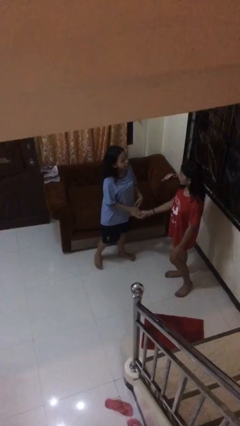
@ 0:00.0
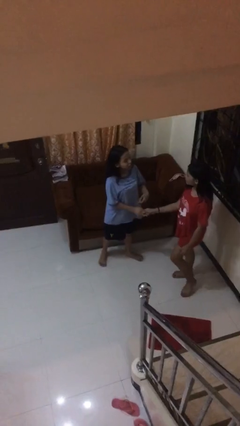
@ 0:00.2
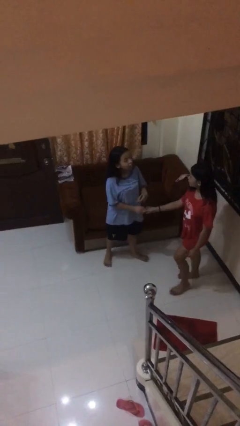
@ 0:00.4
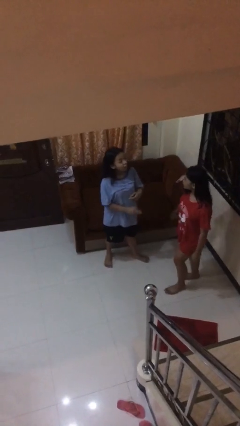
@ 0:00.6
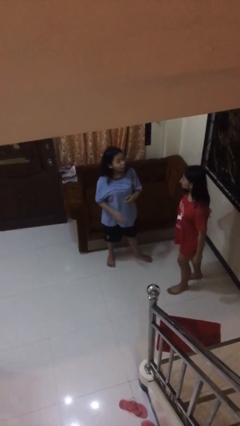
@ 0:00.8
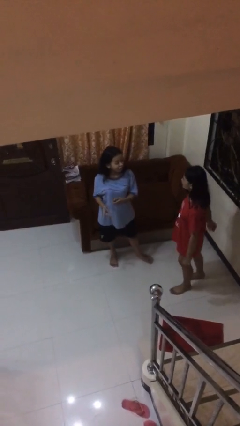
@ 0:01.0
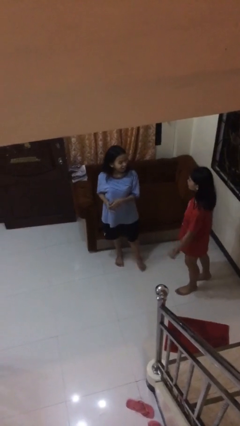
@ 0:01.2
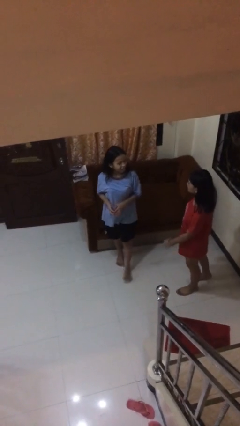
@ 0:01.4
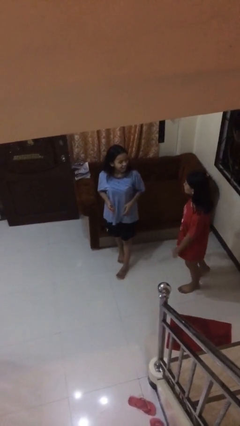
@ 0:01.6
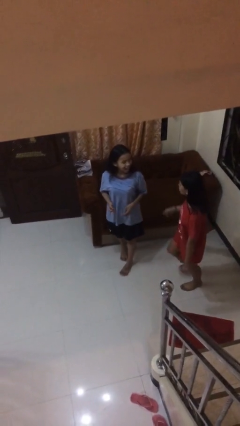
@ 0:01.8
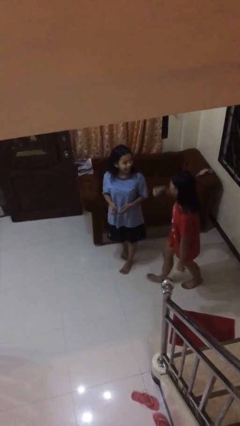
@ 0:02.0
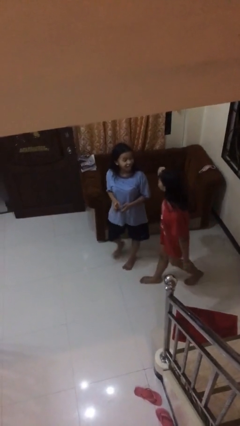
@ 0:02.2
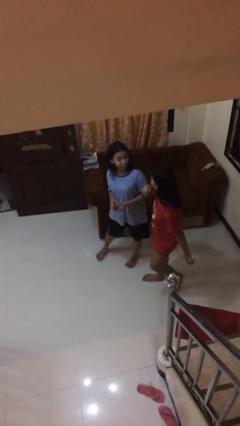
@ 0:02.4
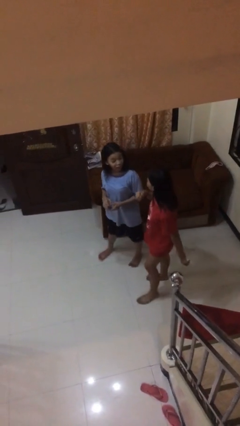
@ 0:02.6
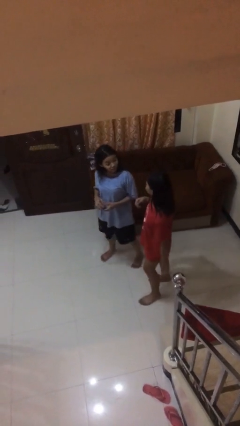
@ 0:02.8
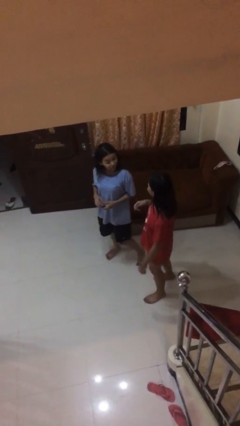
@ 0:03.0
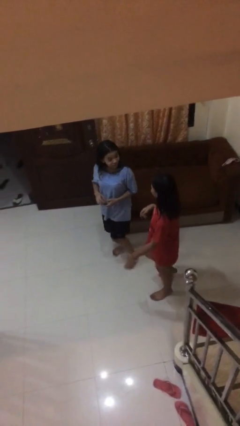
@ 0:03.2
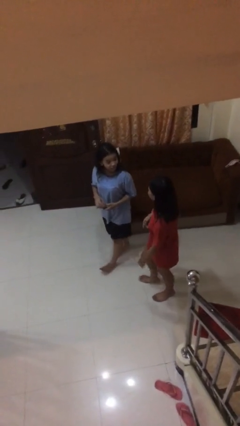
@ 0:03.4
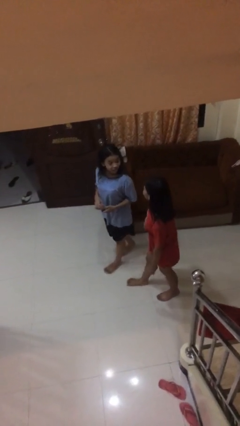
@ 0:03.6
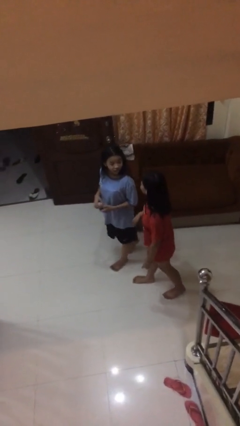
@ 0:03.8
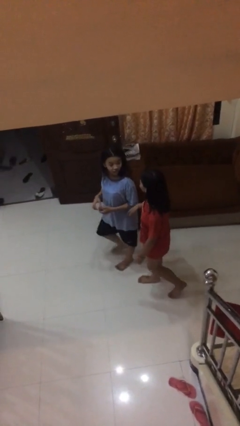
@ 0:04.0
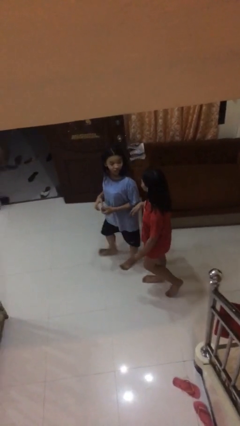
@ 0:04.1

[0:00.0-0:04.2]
person talks to person

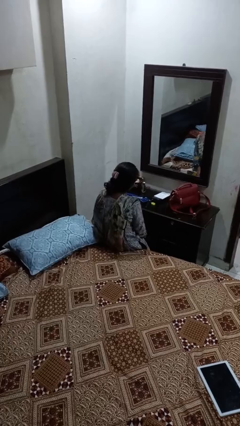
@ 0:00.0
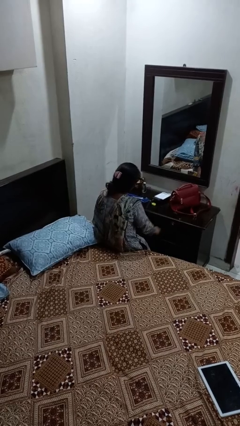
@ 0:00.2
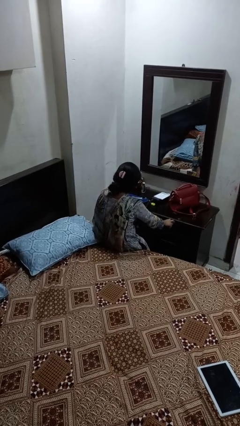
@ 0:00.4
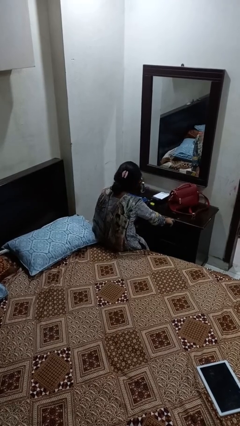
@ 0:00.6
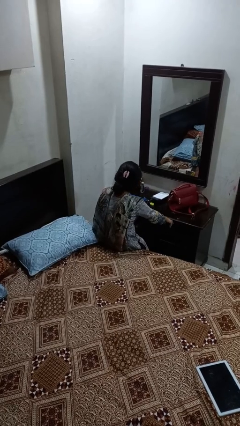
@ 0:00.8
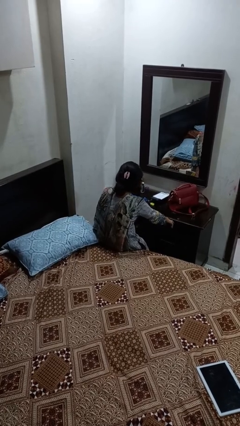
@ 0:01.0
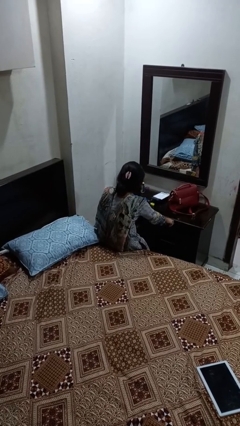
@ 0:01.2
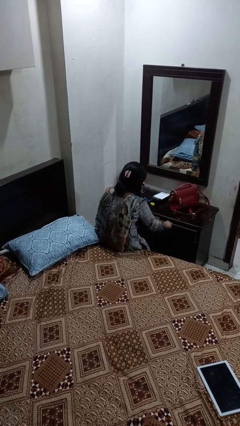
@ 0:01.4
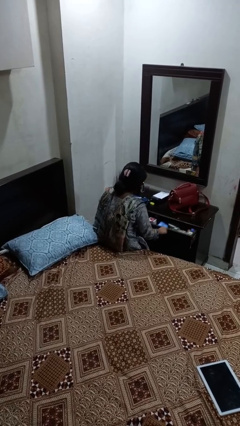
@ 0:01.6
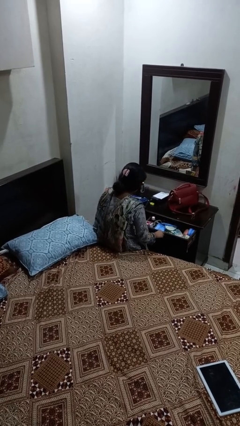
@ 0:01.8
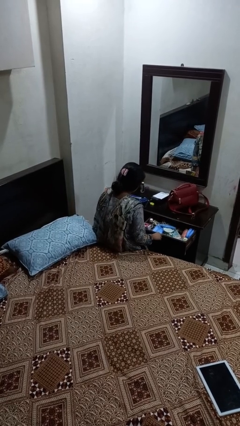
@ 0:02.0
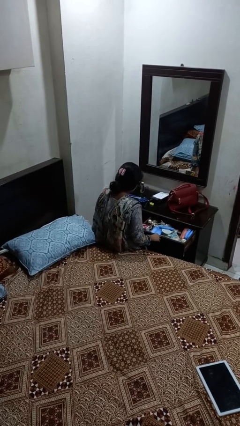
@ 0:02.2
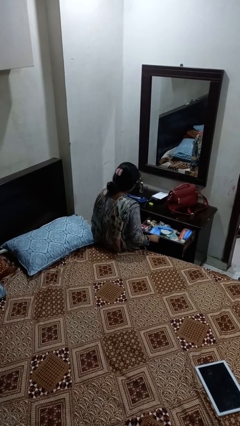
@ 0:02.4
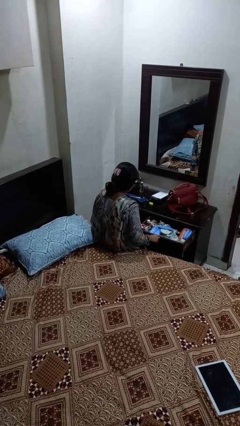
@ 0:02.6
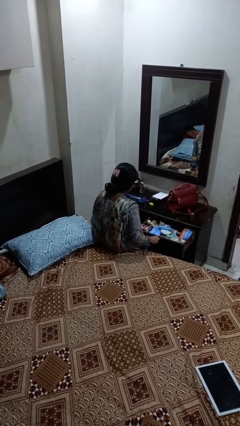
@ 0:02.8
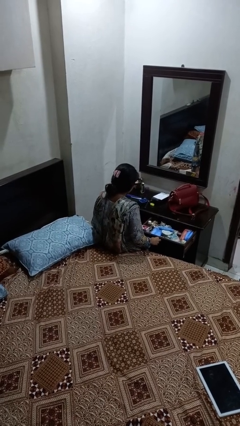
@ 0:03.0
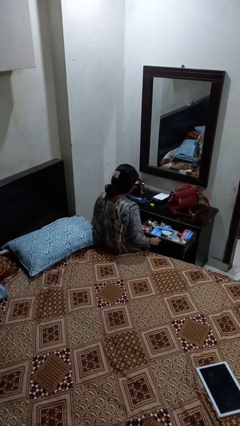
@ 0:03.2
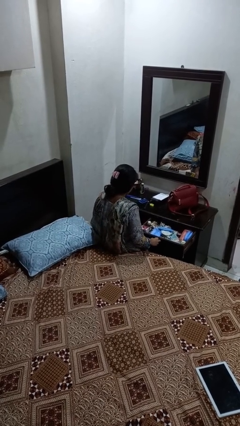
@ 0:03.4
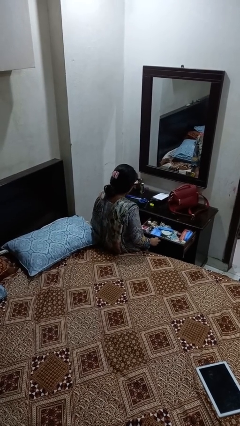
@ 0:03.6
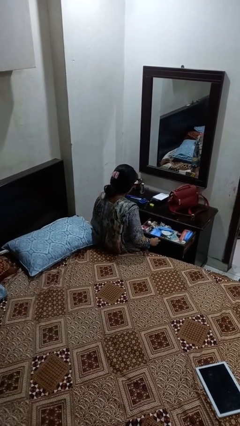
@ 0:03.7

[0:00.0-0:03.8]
person opens dresser drawer

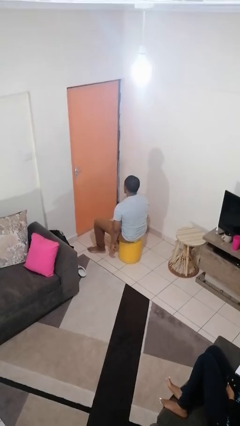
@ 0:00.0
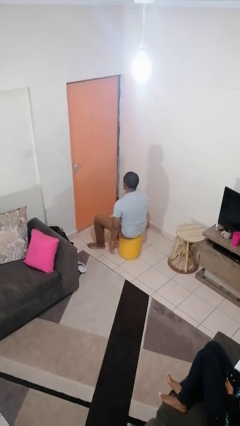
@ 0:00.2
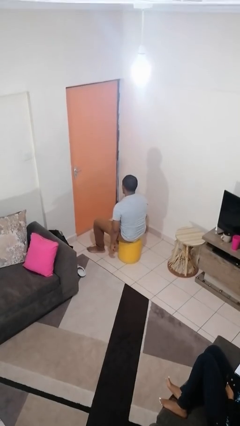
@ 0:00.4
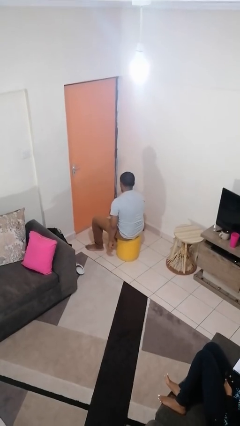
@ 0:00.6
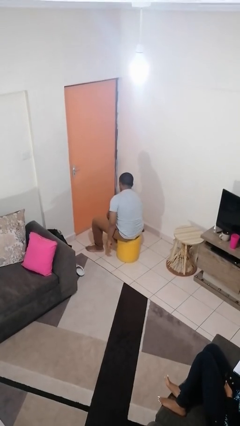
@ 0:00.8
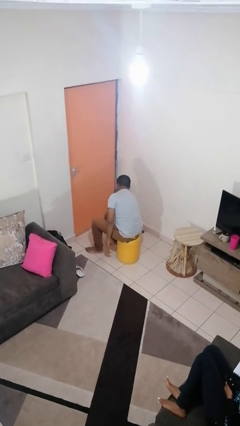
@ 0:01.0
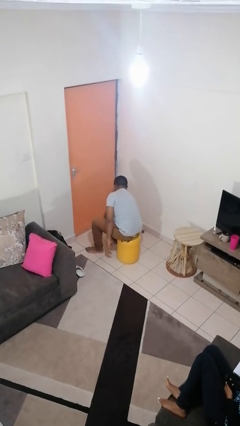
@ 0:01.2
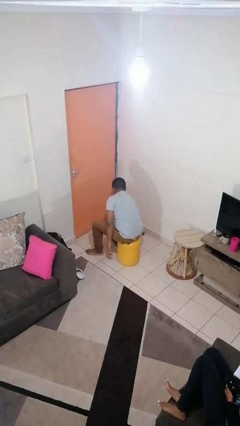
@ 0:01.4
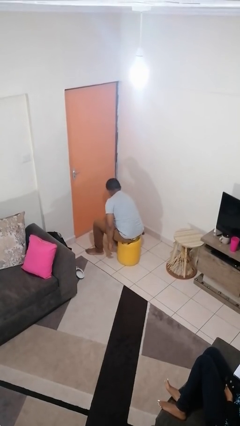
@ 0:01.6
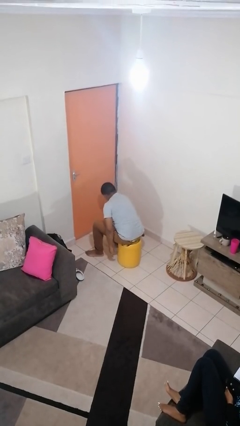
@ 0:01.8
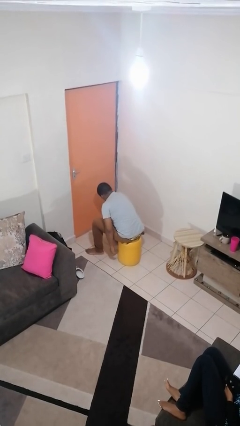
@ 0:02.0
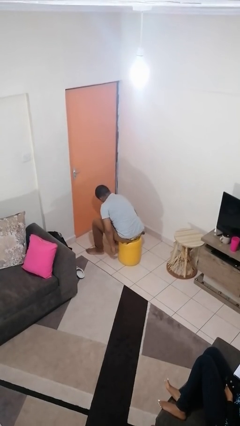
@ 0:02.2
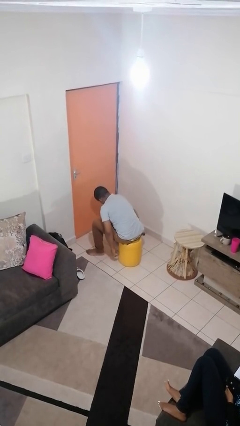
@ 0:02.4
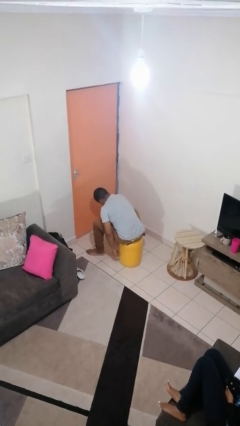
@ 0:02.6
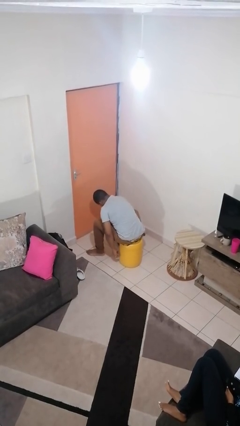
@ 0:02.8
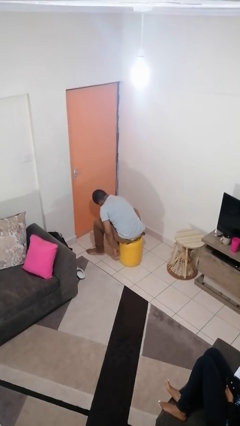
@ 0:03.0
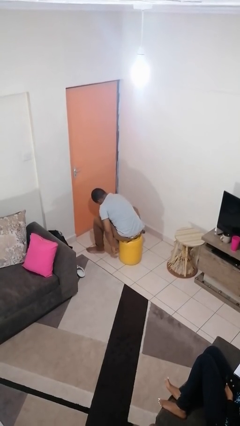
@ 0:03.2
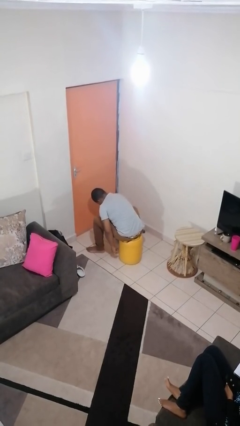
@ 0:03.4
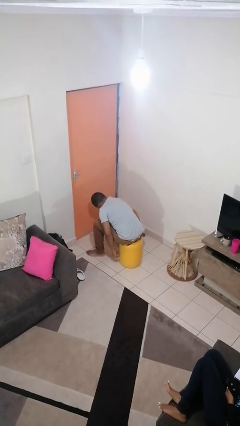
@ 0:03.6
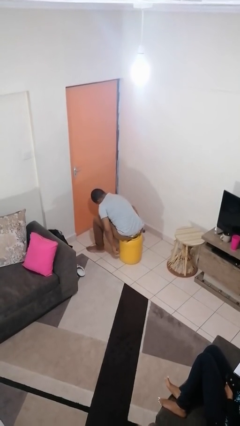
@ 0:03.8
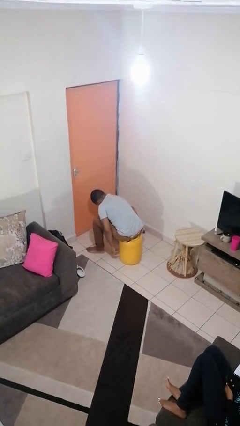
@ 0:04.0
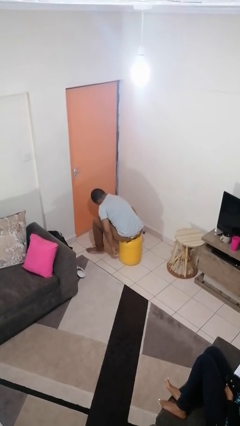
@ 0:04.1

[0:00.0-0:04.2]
person rubs foot

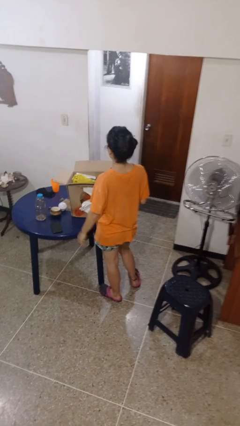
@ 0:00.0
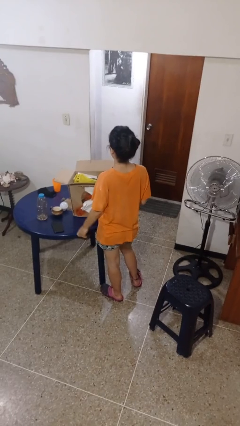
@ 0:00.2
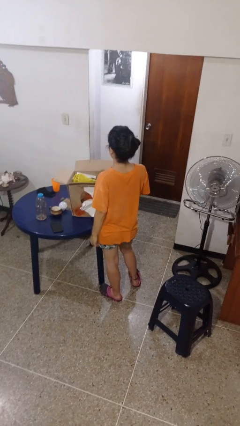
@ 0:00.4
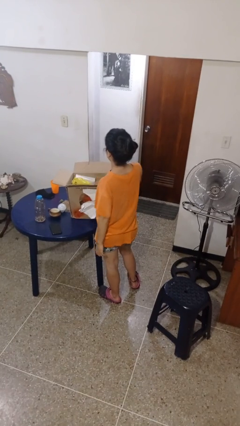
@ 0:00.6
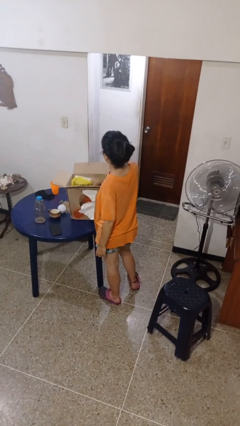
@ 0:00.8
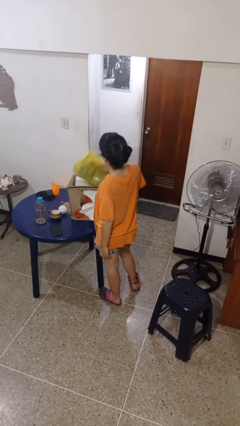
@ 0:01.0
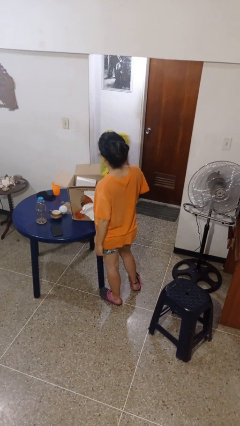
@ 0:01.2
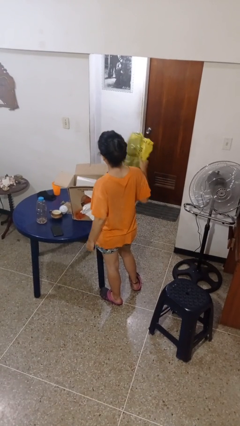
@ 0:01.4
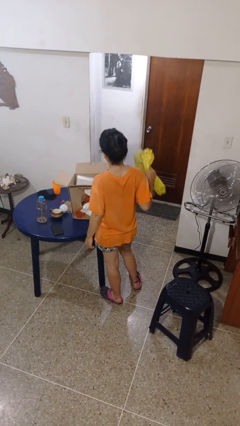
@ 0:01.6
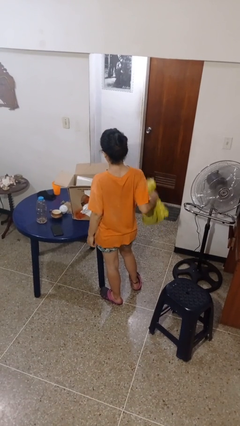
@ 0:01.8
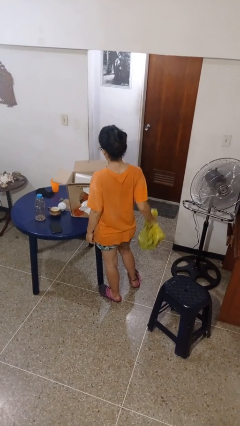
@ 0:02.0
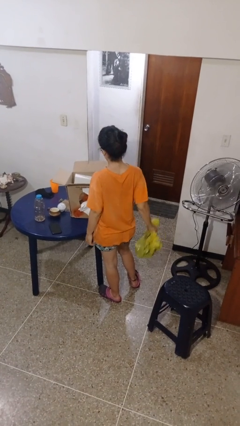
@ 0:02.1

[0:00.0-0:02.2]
person takes object from box

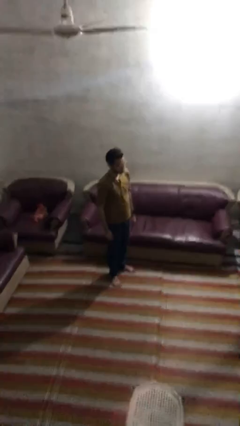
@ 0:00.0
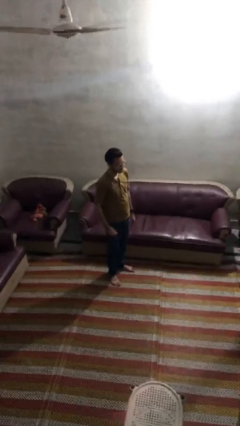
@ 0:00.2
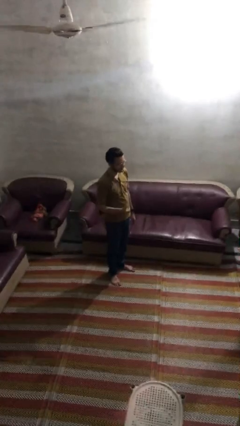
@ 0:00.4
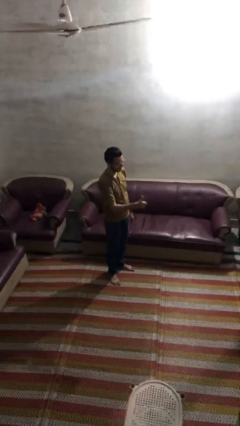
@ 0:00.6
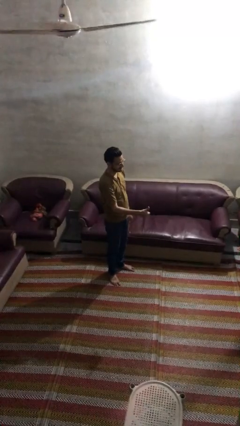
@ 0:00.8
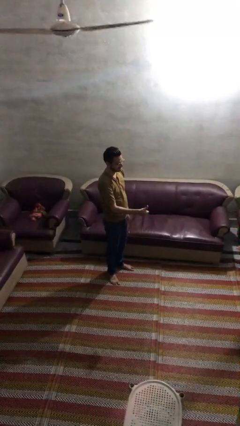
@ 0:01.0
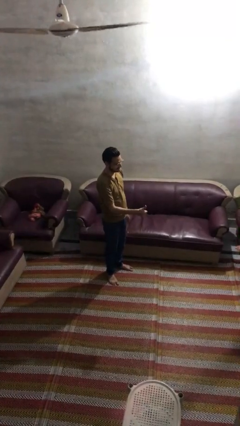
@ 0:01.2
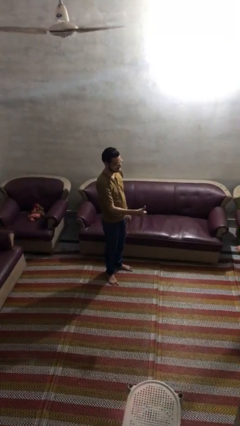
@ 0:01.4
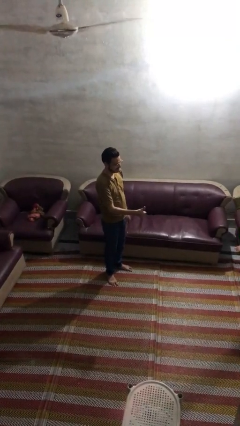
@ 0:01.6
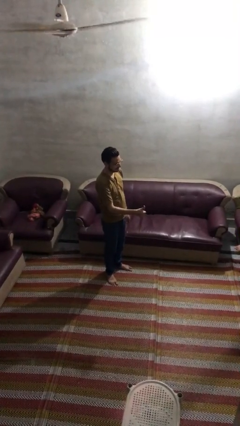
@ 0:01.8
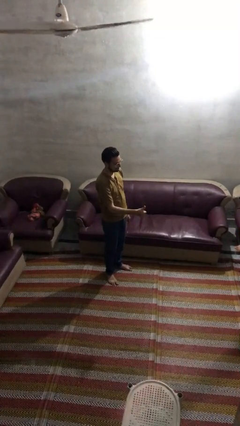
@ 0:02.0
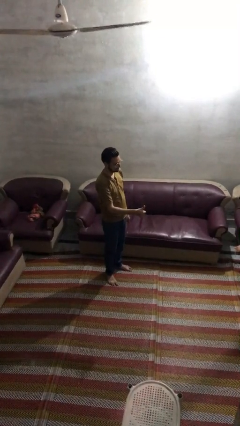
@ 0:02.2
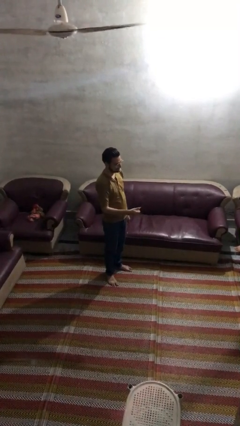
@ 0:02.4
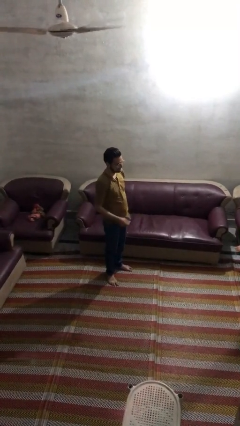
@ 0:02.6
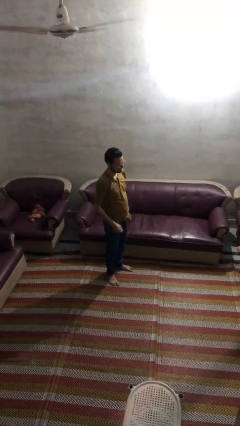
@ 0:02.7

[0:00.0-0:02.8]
person gestures thumbs up
